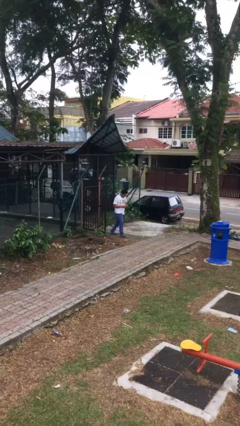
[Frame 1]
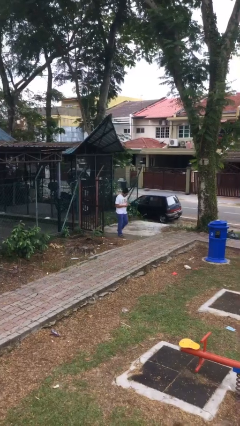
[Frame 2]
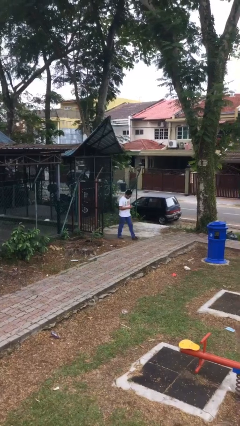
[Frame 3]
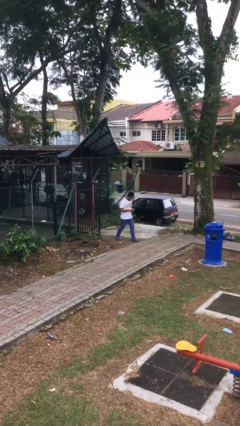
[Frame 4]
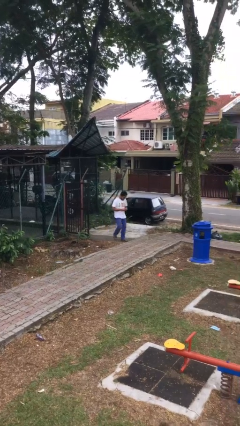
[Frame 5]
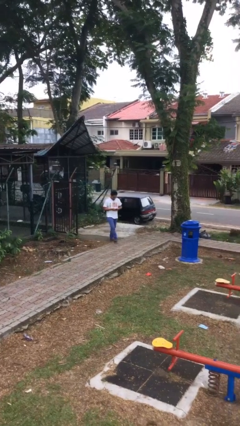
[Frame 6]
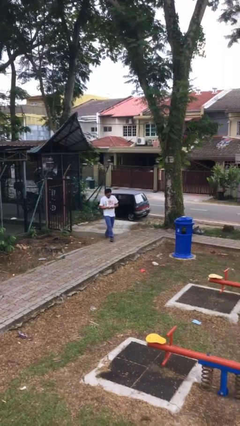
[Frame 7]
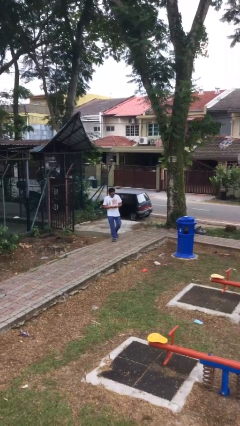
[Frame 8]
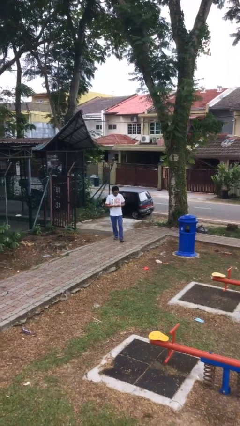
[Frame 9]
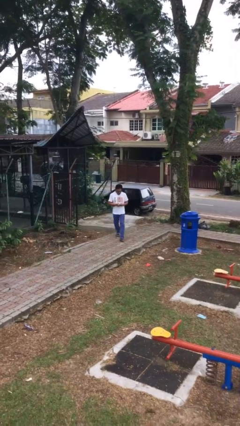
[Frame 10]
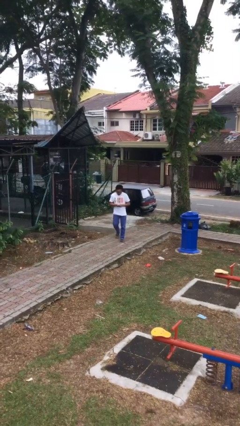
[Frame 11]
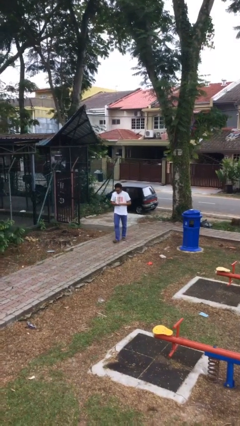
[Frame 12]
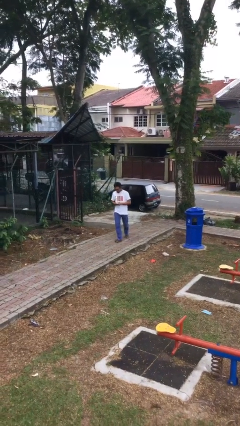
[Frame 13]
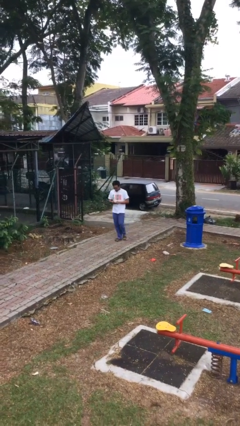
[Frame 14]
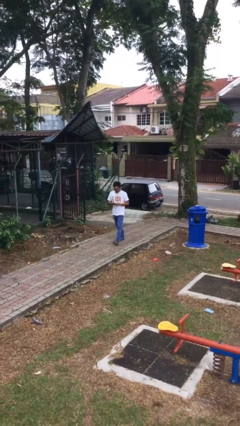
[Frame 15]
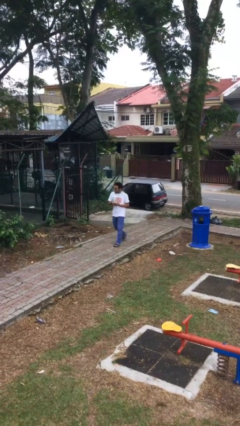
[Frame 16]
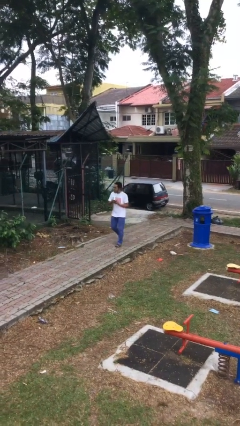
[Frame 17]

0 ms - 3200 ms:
person texts on phone

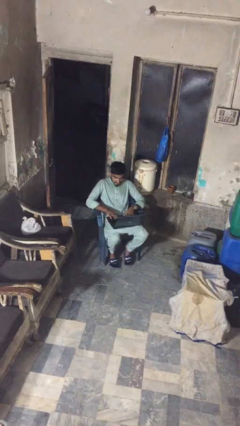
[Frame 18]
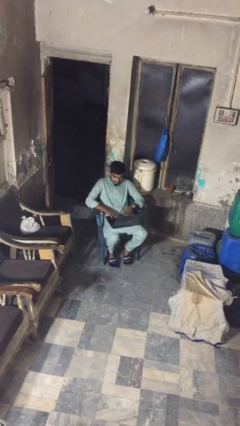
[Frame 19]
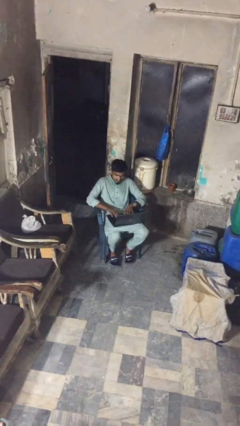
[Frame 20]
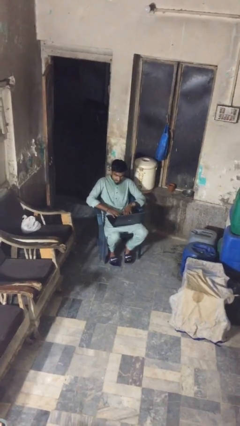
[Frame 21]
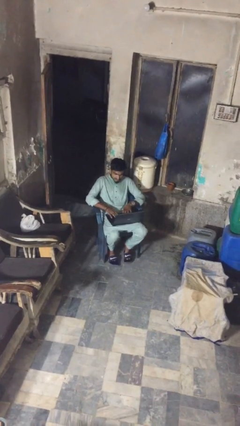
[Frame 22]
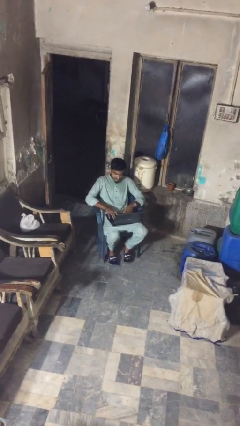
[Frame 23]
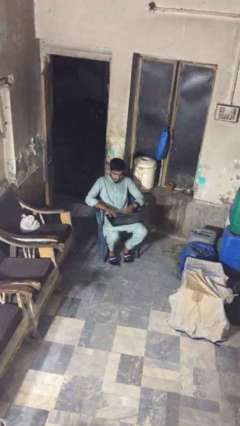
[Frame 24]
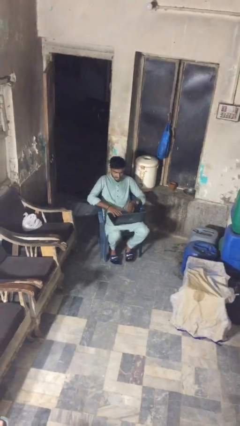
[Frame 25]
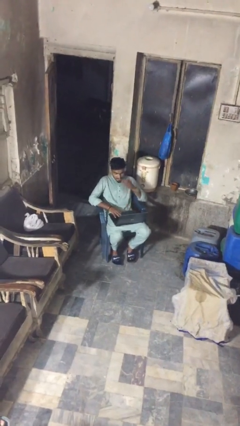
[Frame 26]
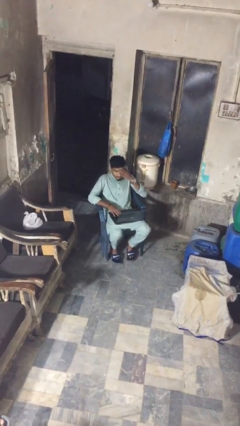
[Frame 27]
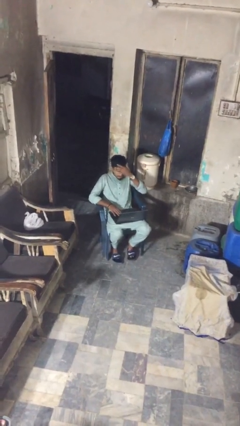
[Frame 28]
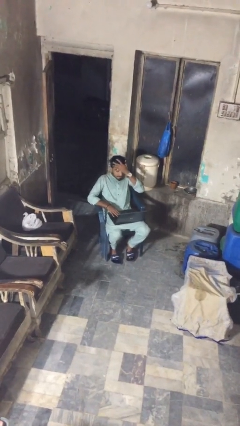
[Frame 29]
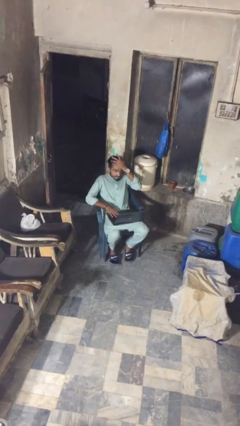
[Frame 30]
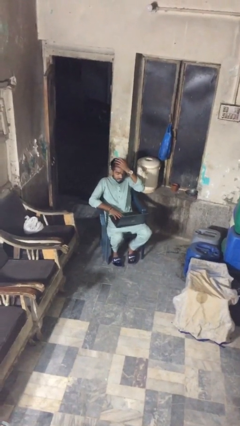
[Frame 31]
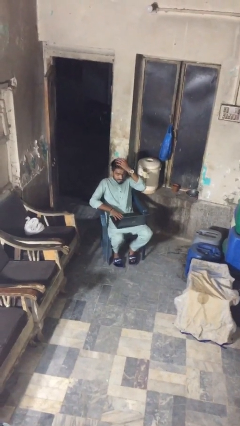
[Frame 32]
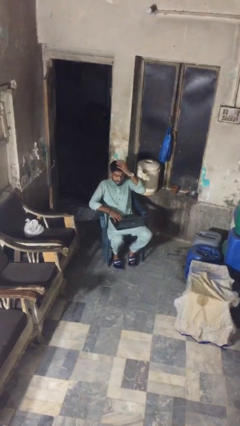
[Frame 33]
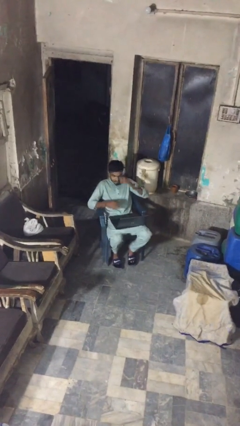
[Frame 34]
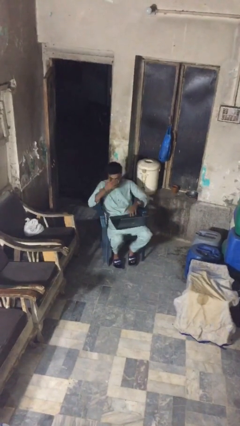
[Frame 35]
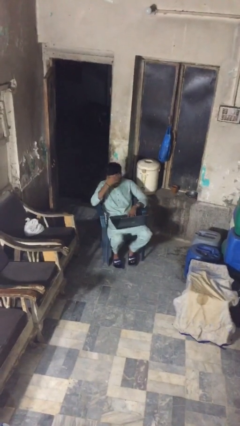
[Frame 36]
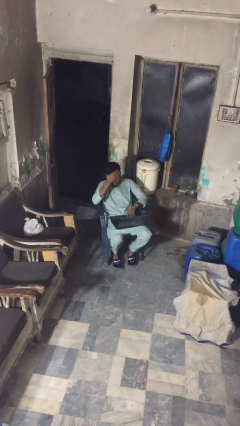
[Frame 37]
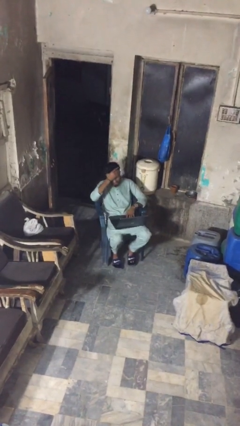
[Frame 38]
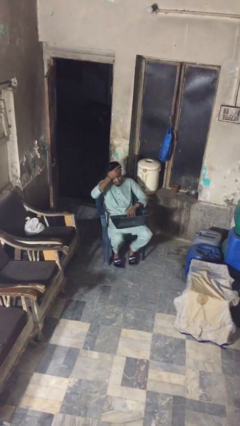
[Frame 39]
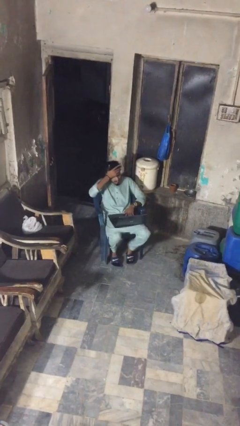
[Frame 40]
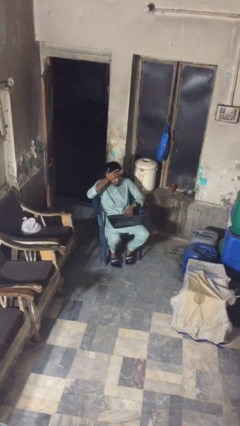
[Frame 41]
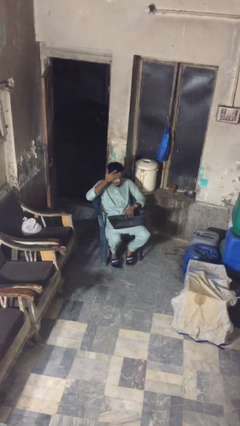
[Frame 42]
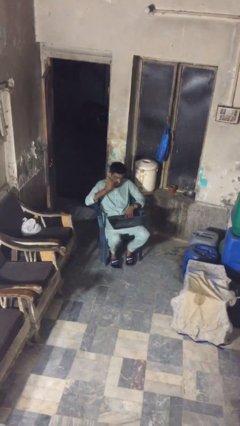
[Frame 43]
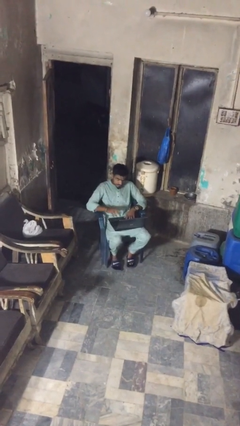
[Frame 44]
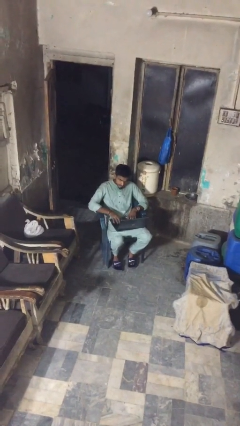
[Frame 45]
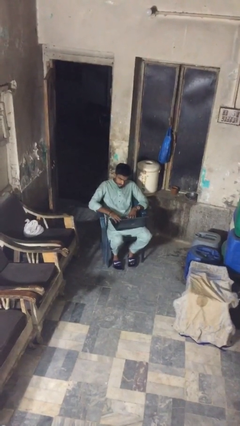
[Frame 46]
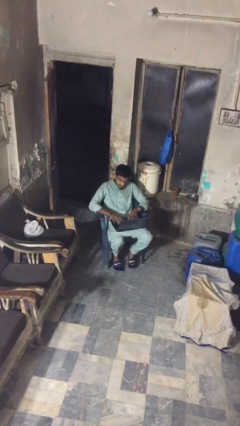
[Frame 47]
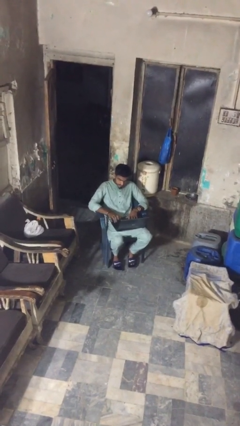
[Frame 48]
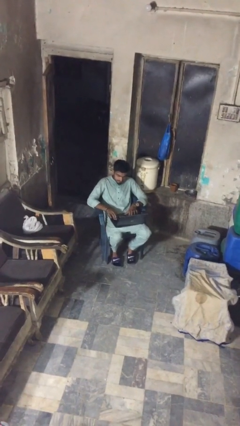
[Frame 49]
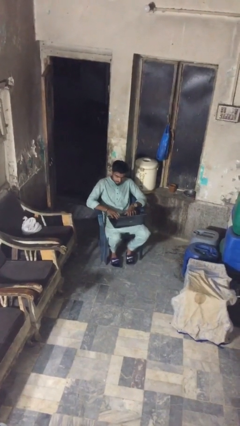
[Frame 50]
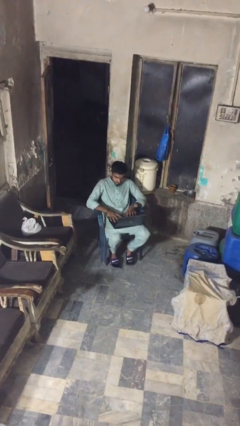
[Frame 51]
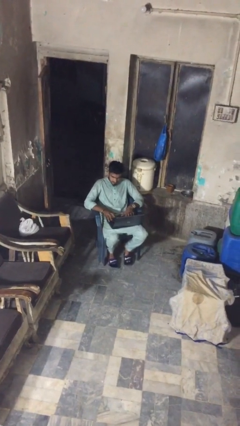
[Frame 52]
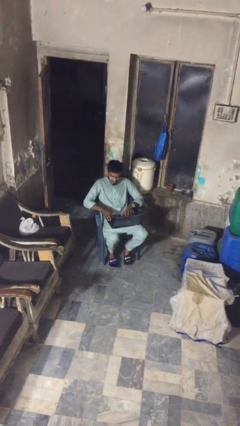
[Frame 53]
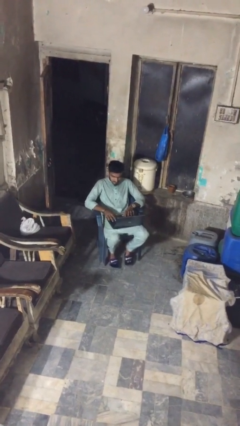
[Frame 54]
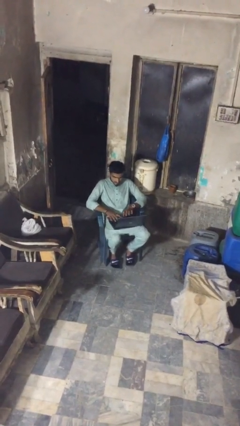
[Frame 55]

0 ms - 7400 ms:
person interacts with laptop

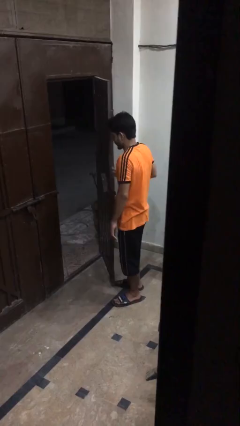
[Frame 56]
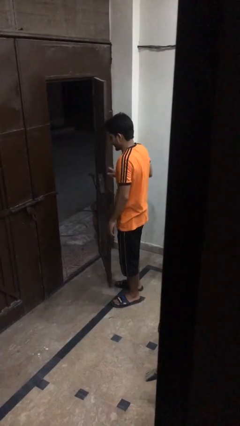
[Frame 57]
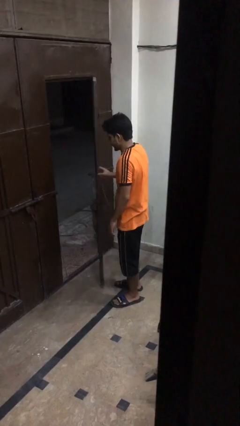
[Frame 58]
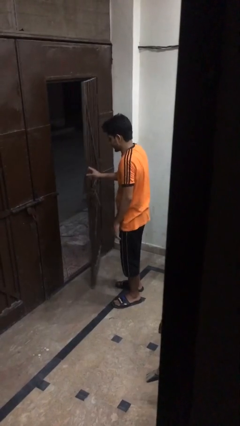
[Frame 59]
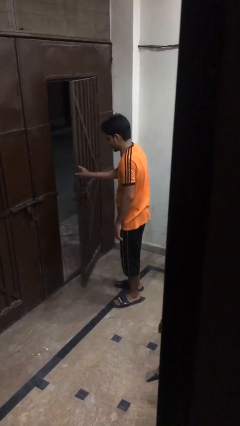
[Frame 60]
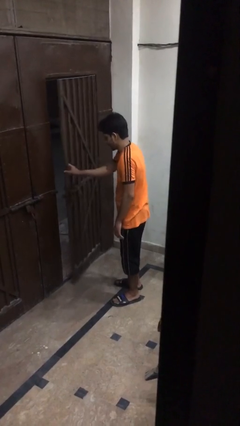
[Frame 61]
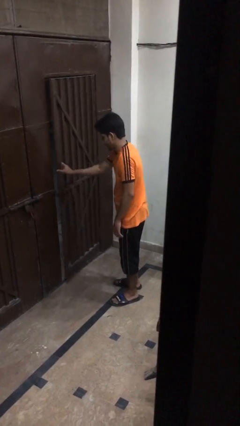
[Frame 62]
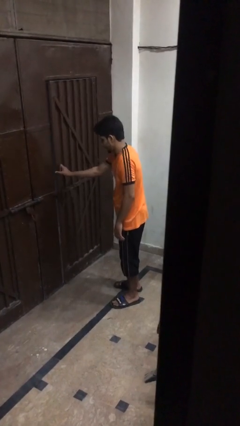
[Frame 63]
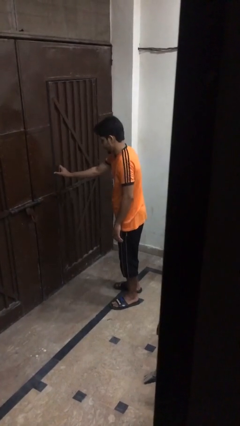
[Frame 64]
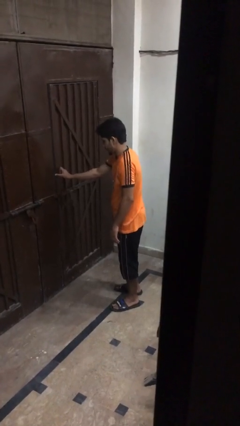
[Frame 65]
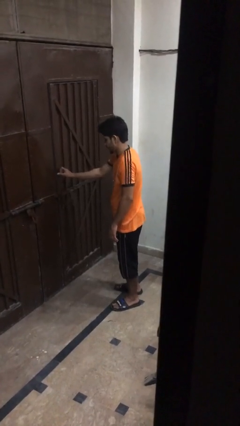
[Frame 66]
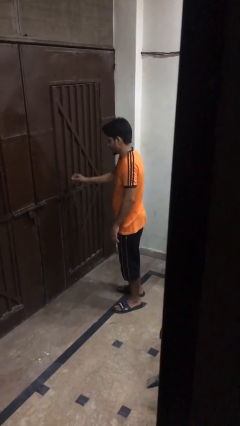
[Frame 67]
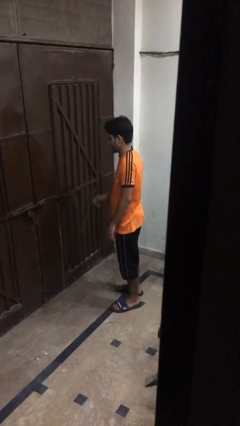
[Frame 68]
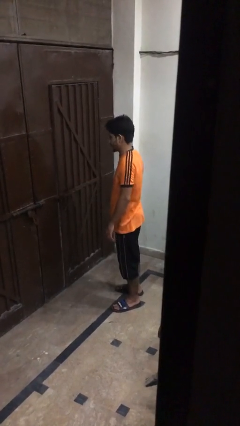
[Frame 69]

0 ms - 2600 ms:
person closes gate

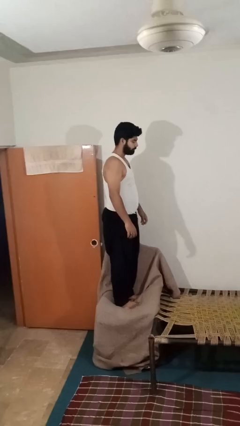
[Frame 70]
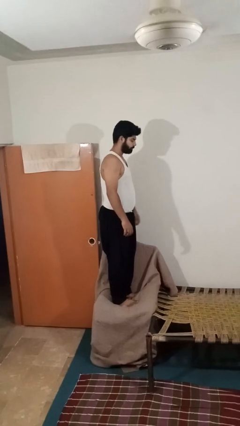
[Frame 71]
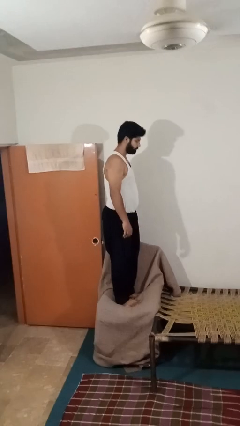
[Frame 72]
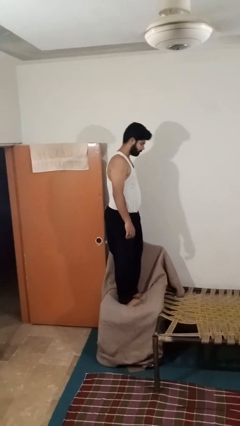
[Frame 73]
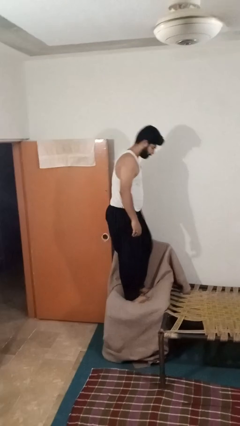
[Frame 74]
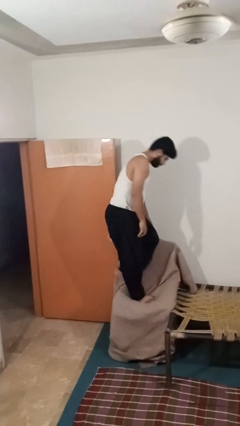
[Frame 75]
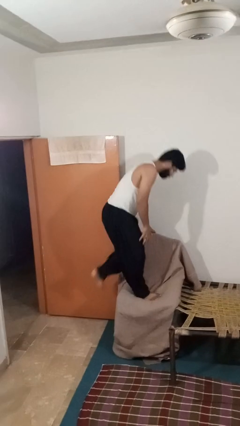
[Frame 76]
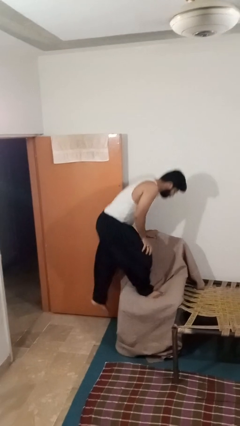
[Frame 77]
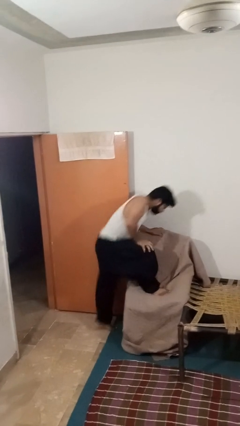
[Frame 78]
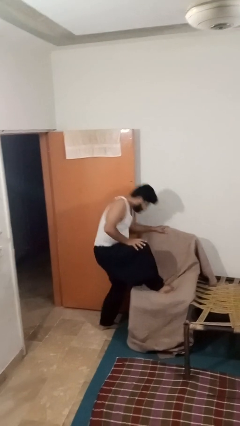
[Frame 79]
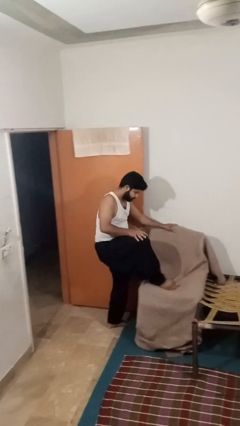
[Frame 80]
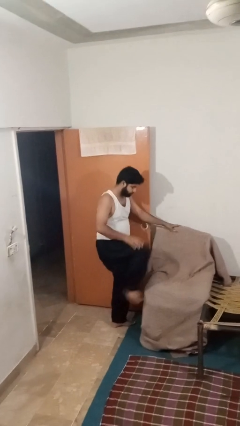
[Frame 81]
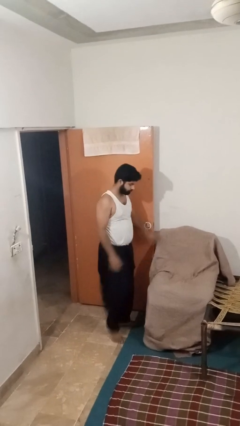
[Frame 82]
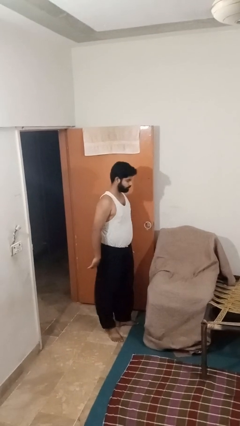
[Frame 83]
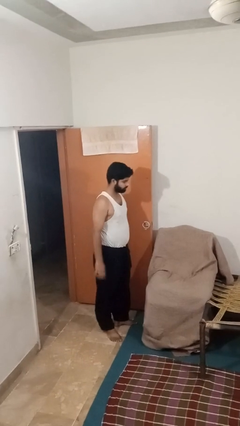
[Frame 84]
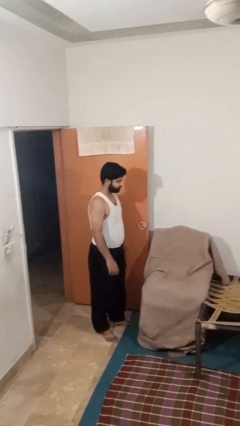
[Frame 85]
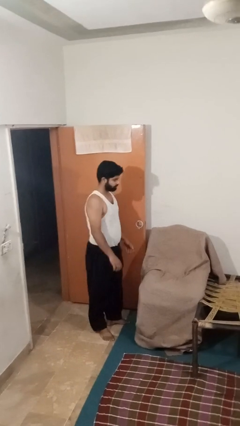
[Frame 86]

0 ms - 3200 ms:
person climbs off couch

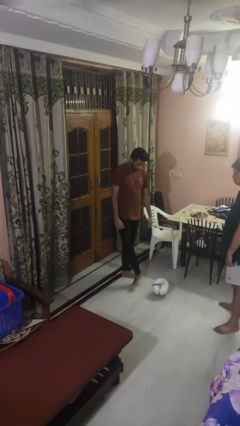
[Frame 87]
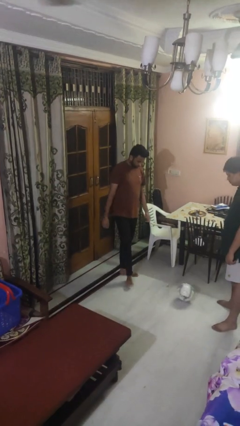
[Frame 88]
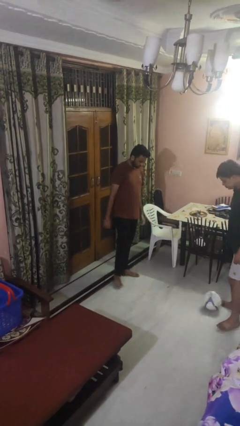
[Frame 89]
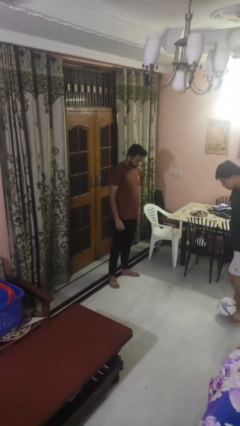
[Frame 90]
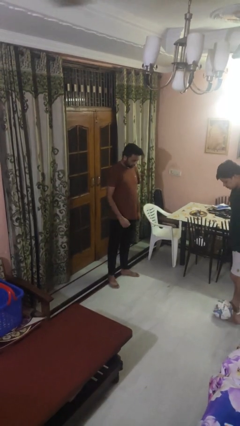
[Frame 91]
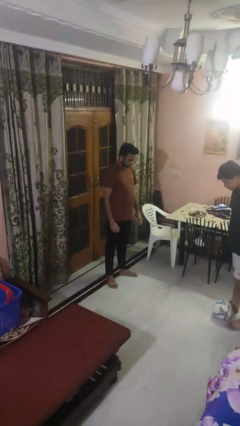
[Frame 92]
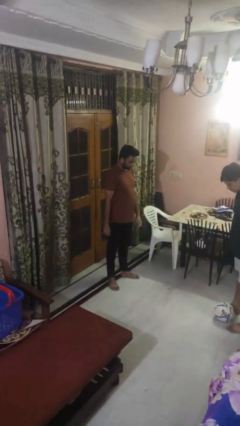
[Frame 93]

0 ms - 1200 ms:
person kicks object to person
